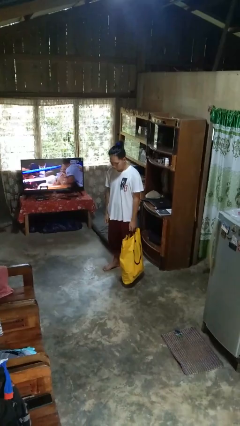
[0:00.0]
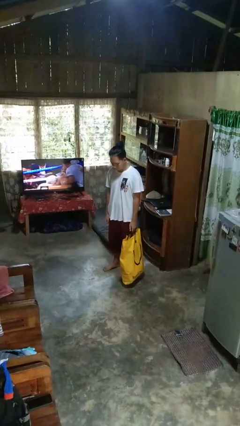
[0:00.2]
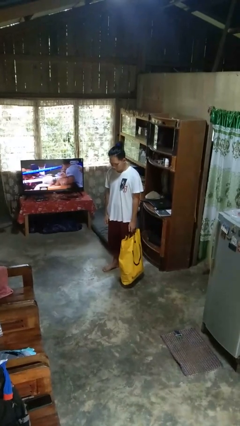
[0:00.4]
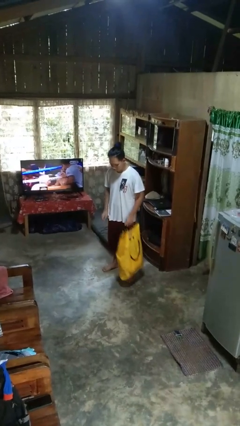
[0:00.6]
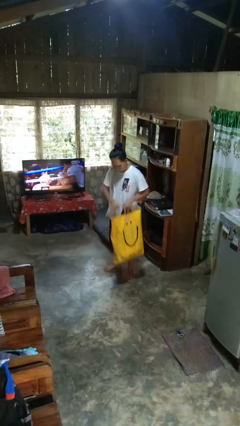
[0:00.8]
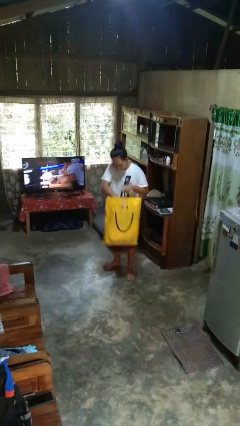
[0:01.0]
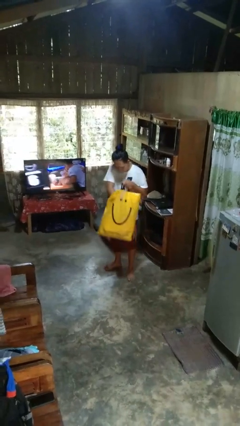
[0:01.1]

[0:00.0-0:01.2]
person searches in bag

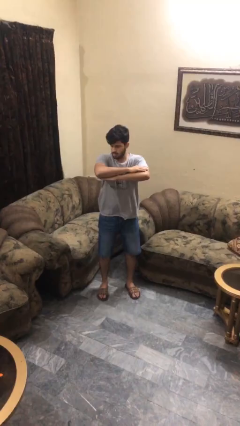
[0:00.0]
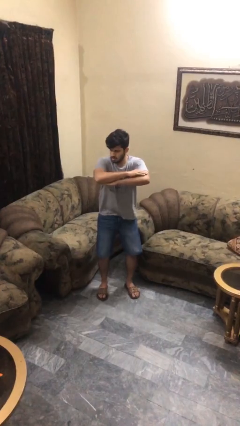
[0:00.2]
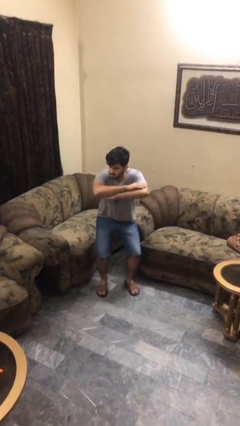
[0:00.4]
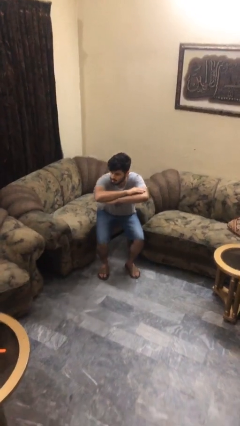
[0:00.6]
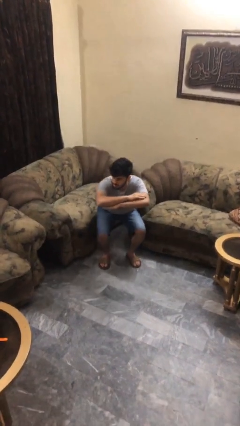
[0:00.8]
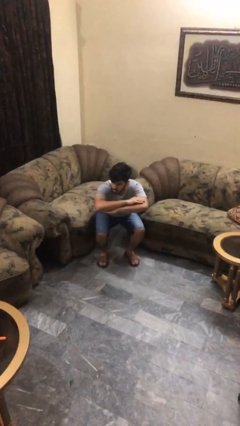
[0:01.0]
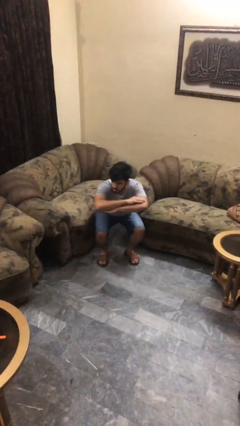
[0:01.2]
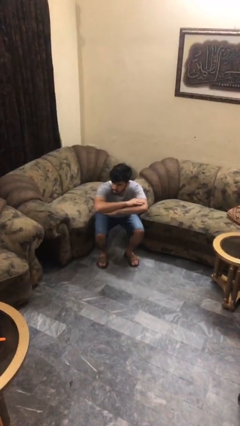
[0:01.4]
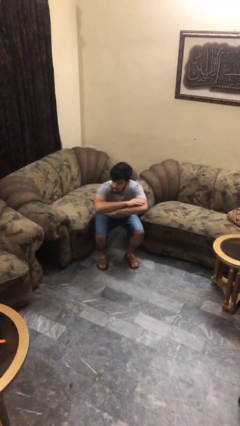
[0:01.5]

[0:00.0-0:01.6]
person squats

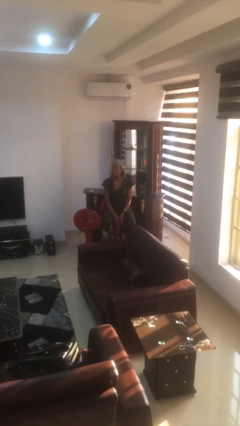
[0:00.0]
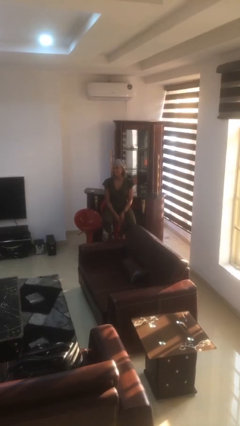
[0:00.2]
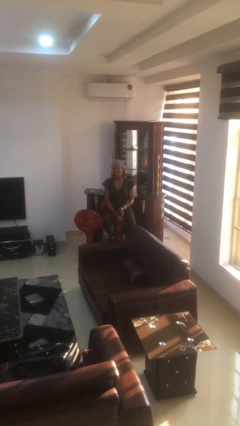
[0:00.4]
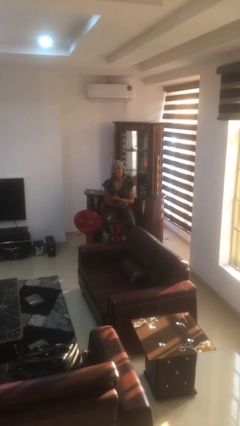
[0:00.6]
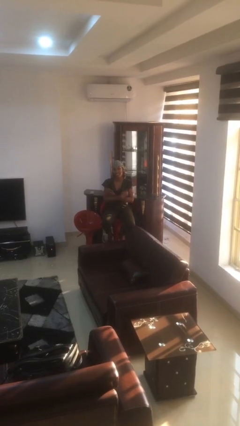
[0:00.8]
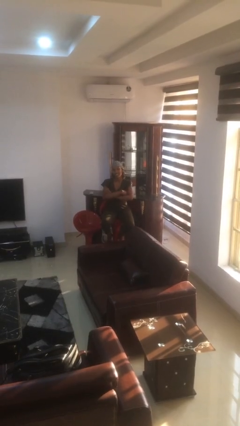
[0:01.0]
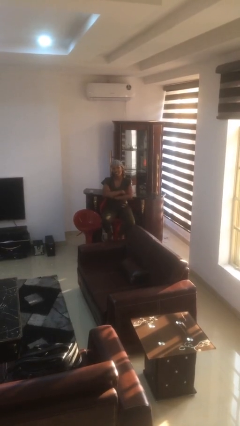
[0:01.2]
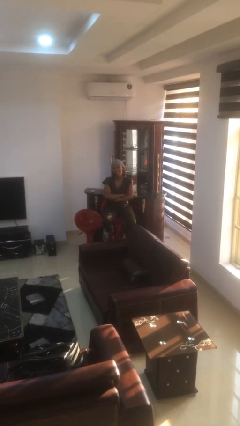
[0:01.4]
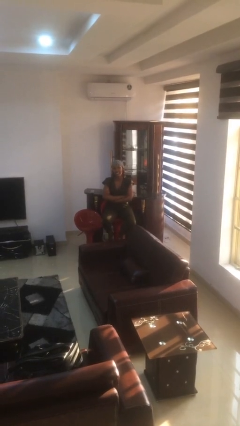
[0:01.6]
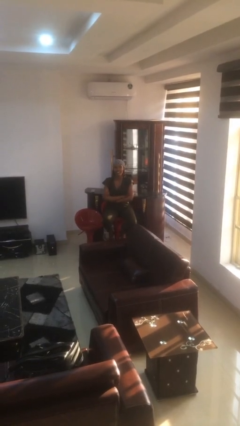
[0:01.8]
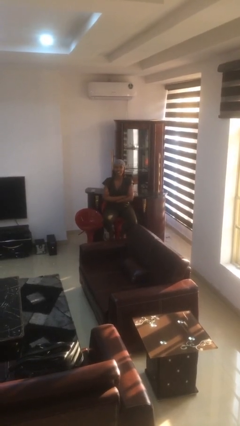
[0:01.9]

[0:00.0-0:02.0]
person crosses arms

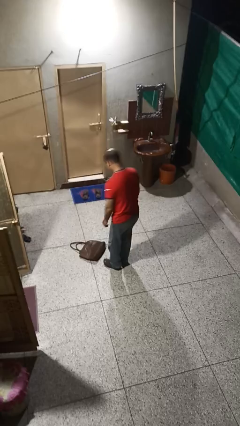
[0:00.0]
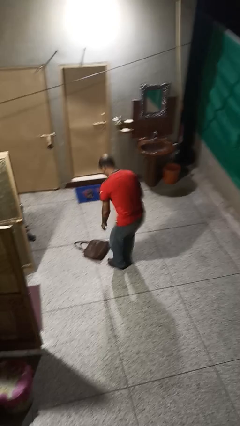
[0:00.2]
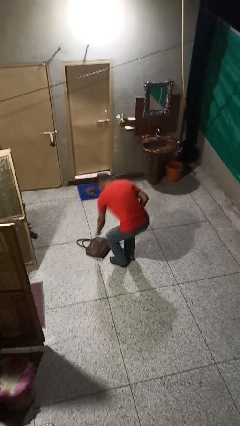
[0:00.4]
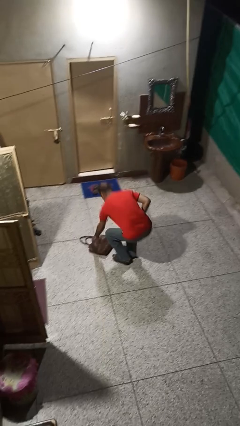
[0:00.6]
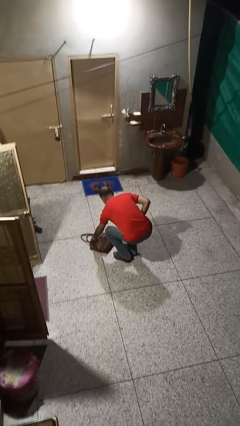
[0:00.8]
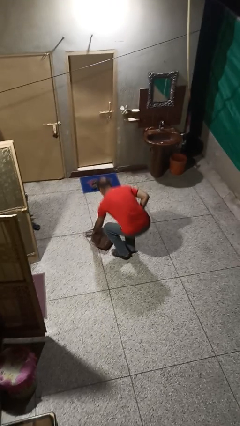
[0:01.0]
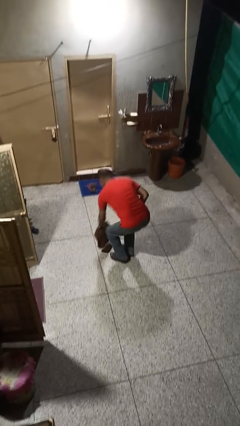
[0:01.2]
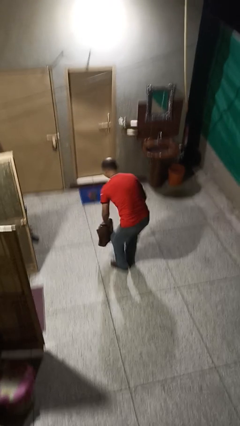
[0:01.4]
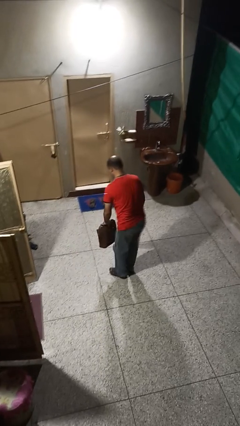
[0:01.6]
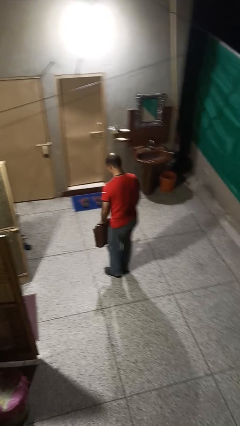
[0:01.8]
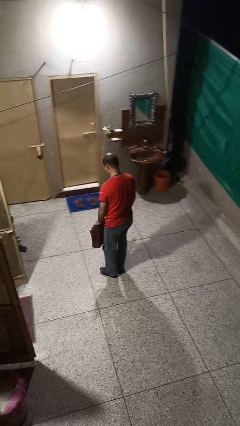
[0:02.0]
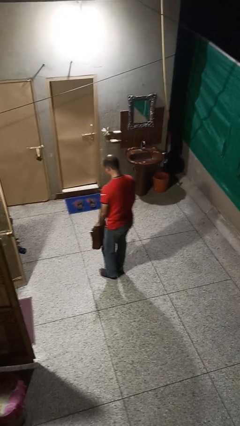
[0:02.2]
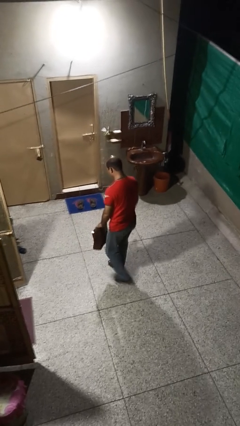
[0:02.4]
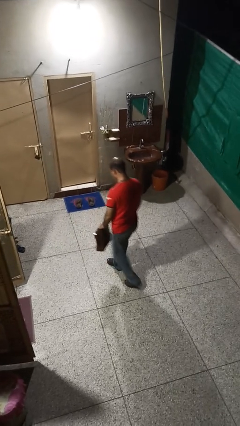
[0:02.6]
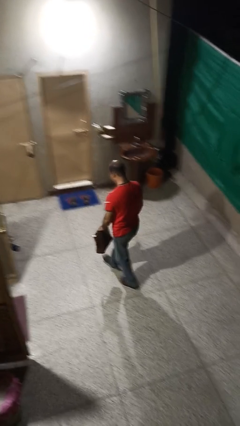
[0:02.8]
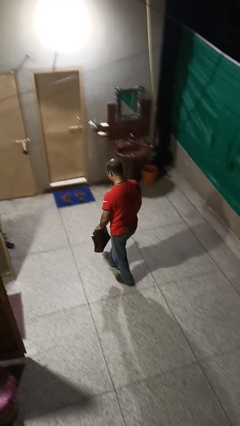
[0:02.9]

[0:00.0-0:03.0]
person picks up object from floor

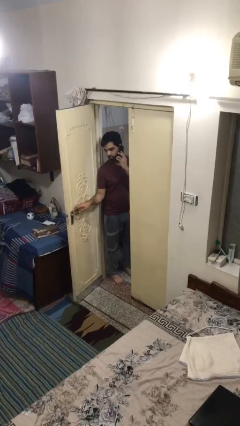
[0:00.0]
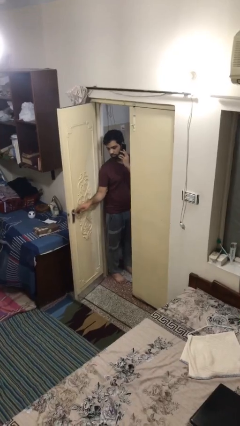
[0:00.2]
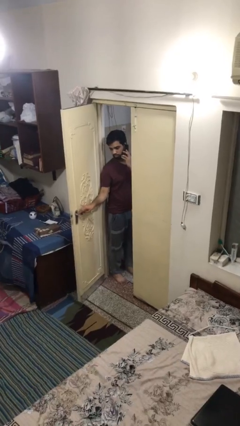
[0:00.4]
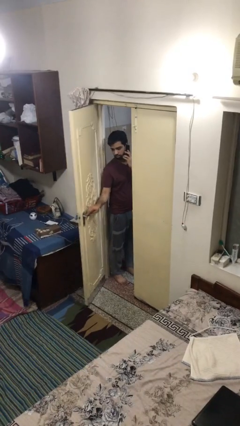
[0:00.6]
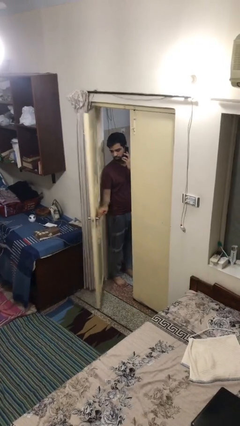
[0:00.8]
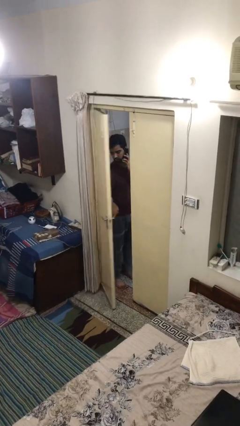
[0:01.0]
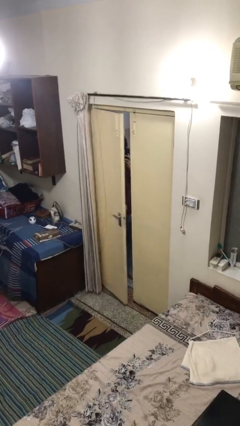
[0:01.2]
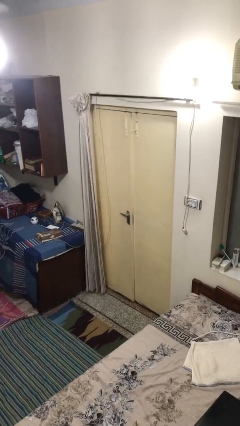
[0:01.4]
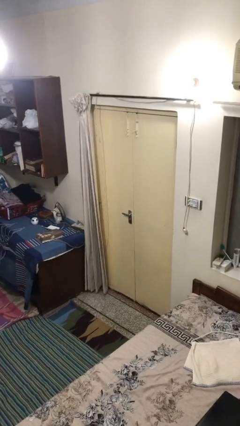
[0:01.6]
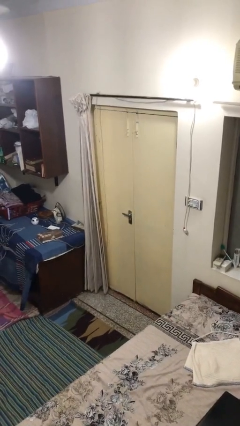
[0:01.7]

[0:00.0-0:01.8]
person closes facility door

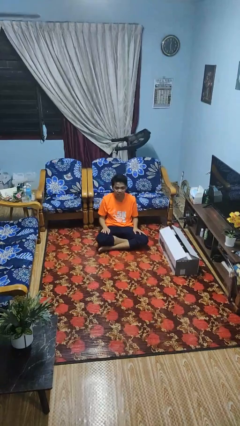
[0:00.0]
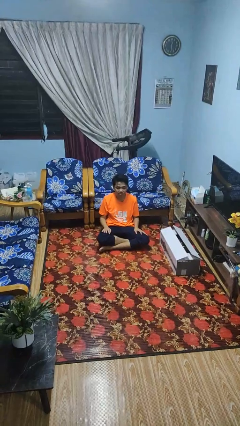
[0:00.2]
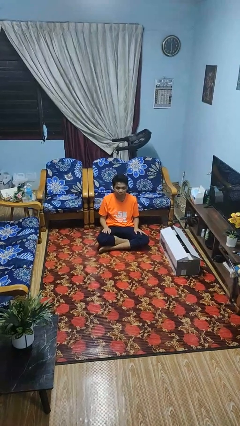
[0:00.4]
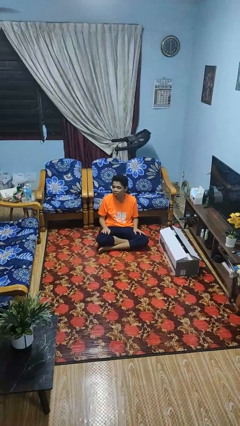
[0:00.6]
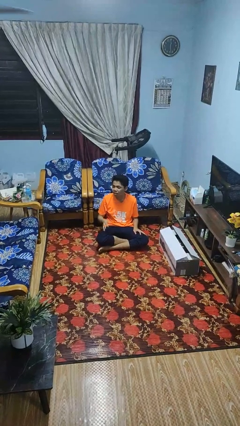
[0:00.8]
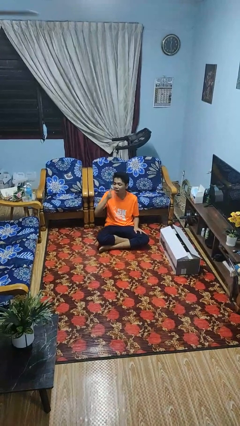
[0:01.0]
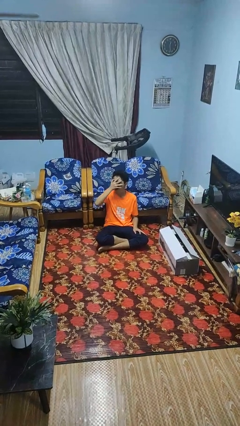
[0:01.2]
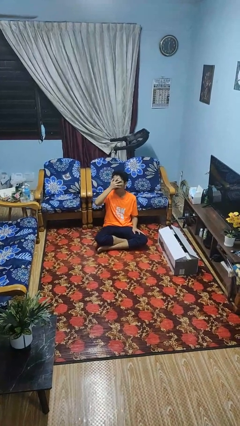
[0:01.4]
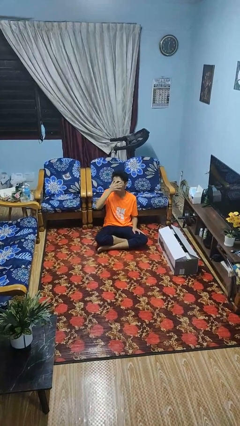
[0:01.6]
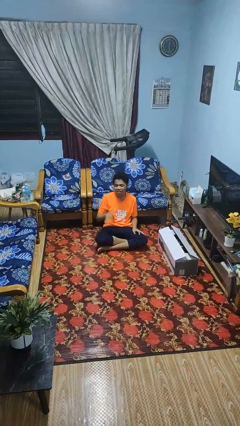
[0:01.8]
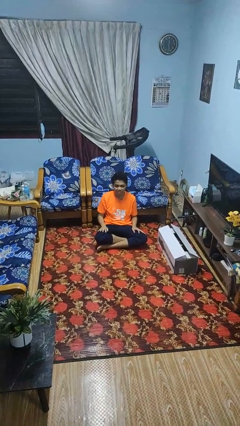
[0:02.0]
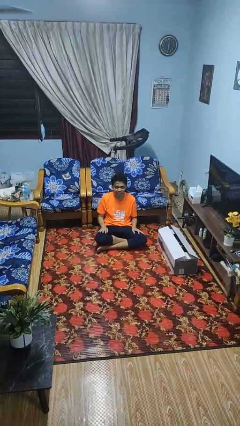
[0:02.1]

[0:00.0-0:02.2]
person covers face with hands

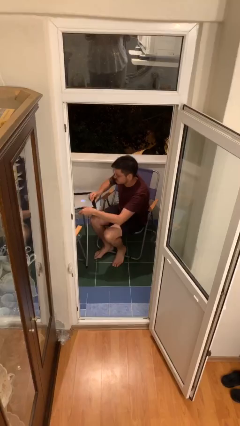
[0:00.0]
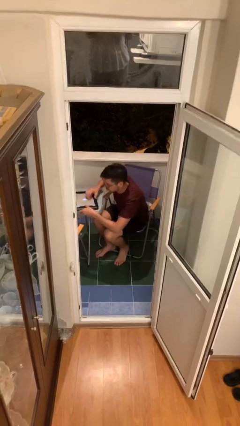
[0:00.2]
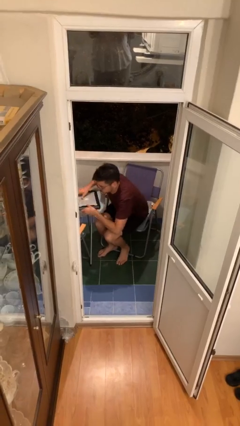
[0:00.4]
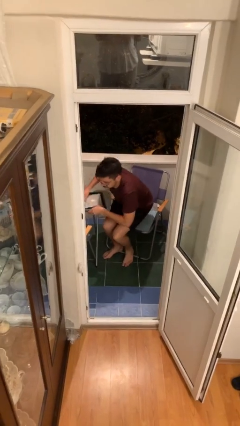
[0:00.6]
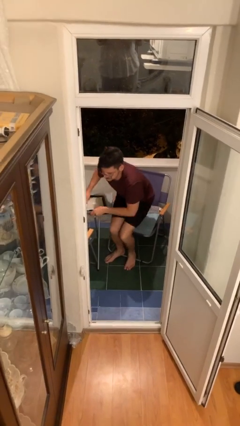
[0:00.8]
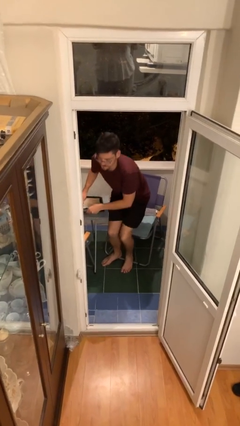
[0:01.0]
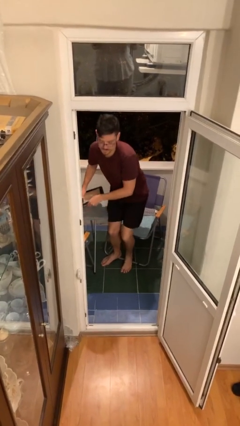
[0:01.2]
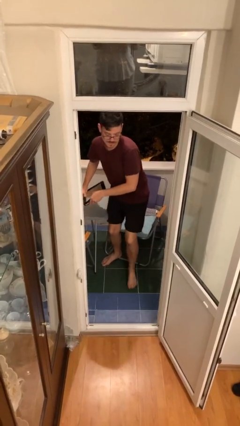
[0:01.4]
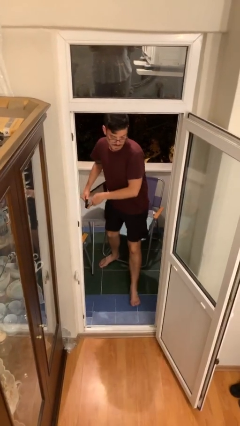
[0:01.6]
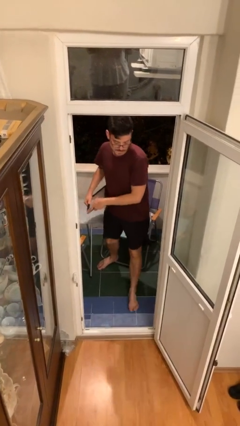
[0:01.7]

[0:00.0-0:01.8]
person stands up

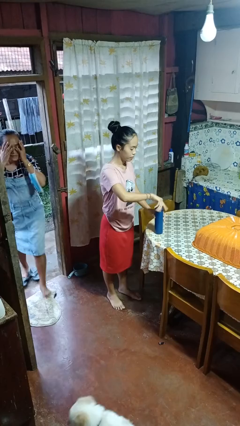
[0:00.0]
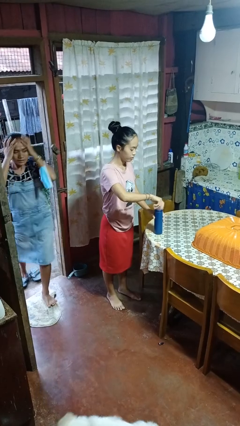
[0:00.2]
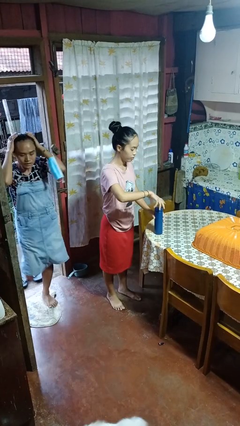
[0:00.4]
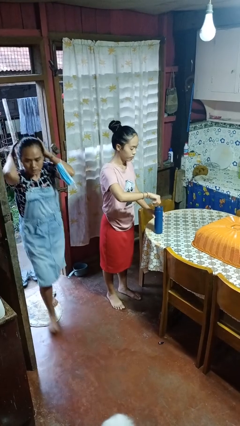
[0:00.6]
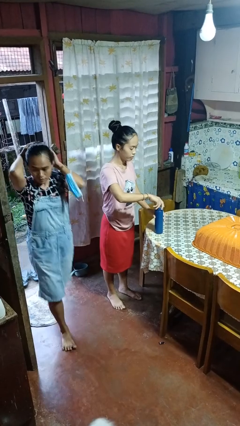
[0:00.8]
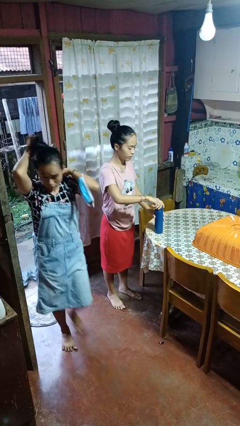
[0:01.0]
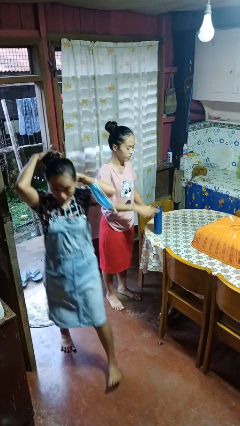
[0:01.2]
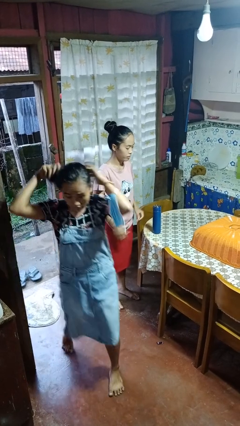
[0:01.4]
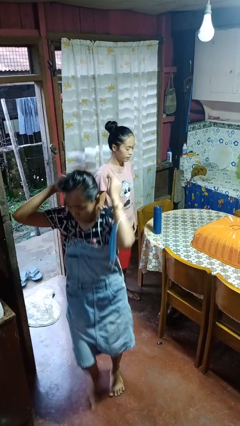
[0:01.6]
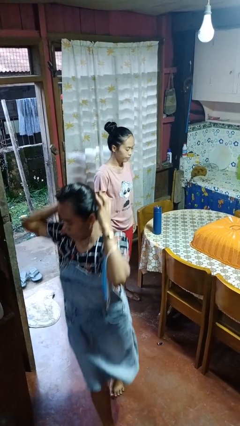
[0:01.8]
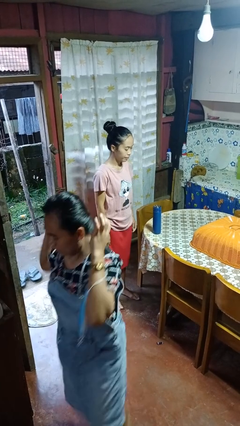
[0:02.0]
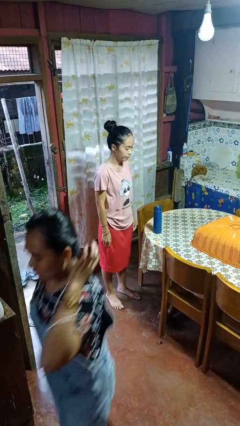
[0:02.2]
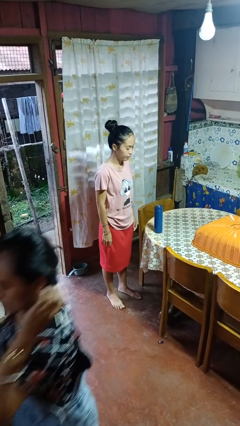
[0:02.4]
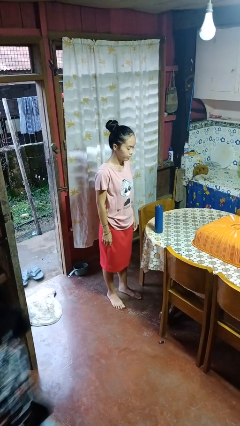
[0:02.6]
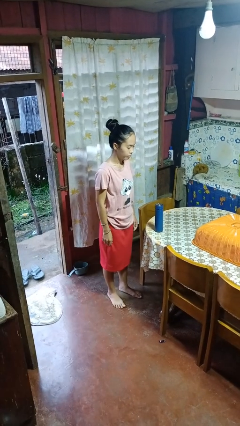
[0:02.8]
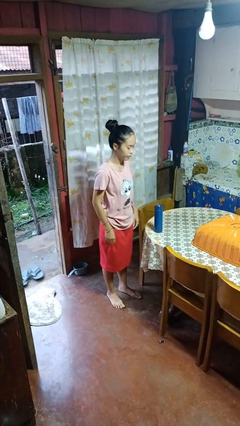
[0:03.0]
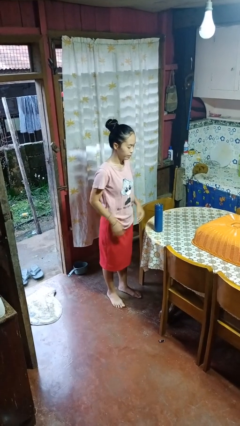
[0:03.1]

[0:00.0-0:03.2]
person closes jar
